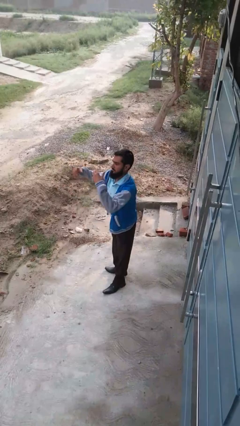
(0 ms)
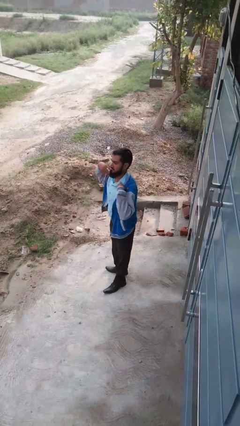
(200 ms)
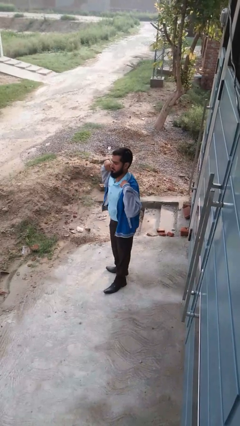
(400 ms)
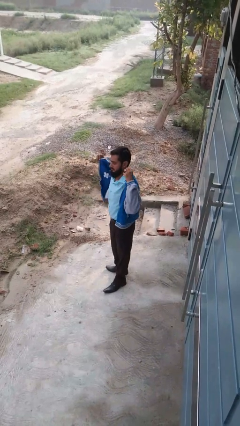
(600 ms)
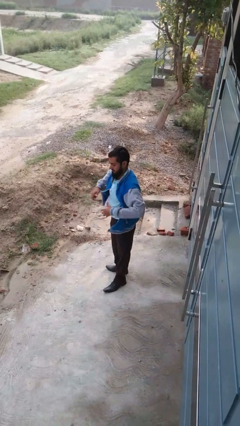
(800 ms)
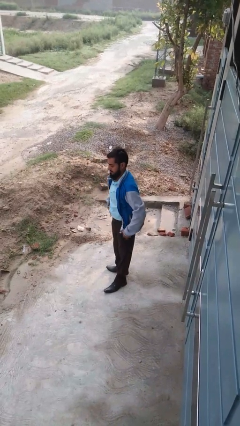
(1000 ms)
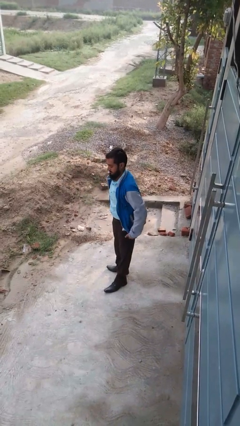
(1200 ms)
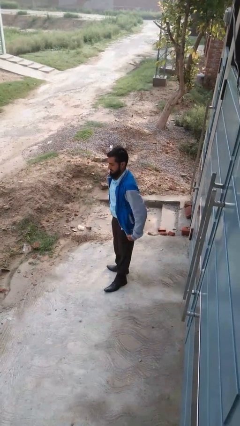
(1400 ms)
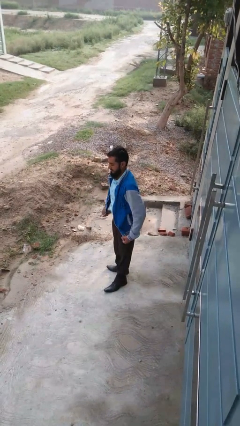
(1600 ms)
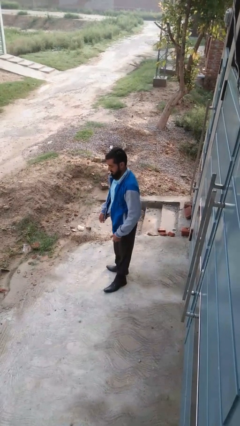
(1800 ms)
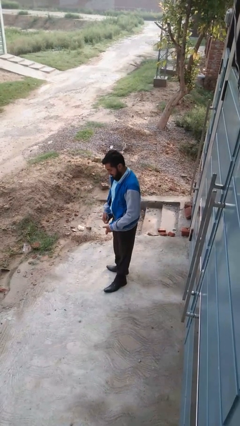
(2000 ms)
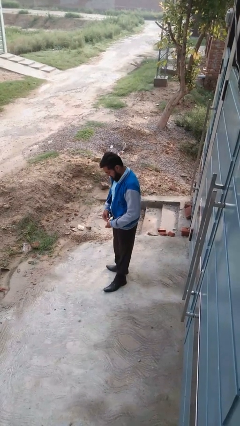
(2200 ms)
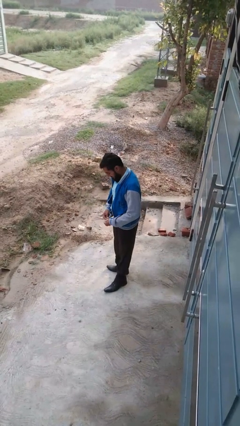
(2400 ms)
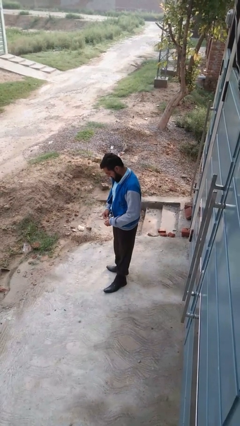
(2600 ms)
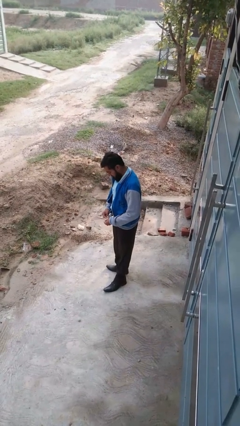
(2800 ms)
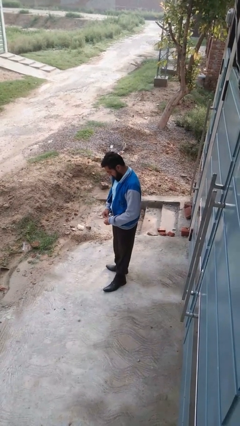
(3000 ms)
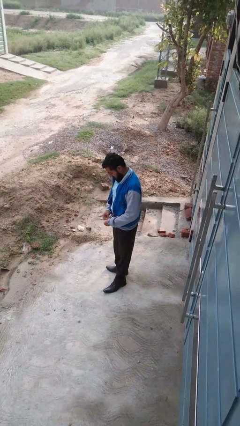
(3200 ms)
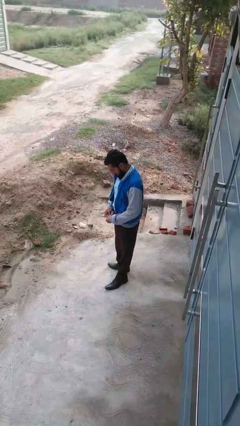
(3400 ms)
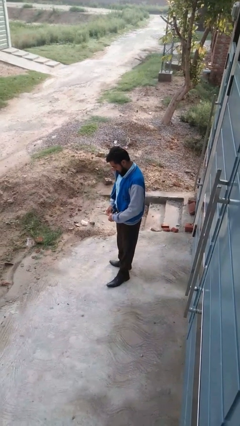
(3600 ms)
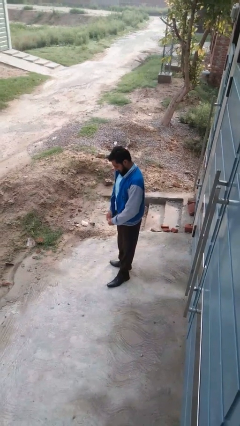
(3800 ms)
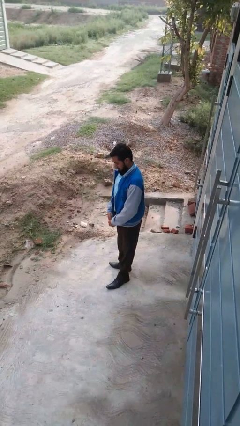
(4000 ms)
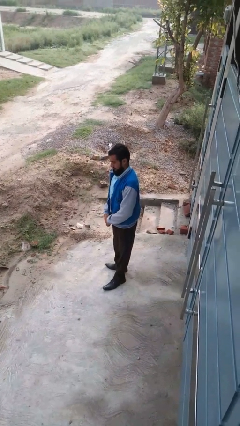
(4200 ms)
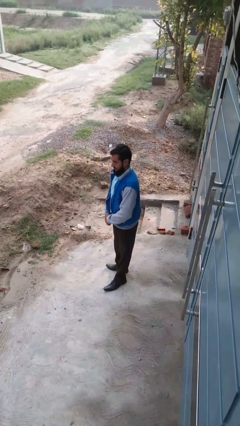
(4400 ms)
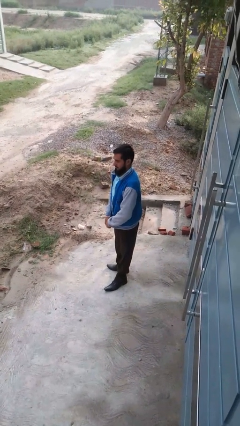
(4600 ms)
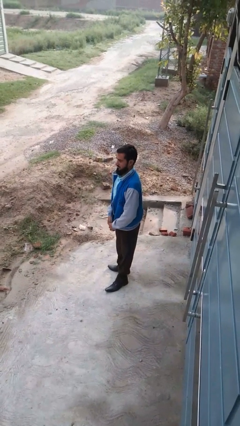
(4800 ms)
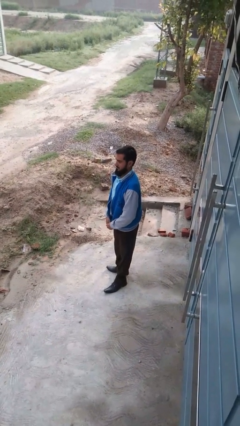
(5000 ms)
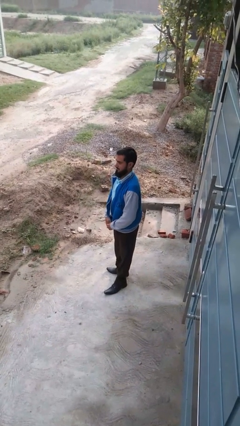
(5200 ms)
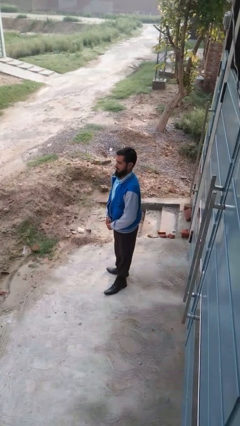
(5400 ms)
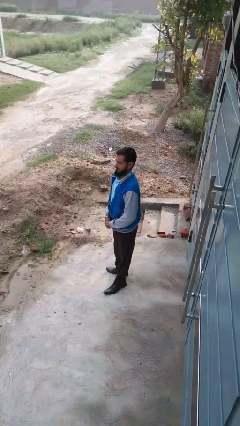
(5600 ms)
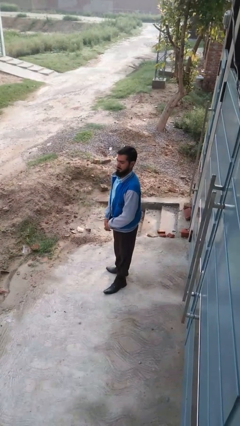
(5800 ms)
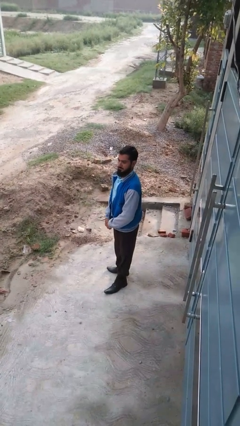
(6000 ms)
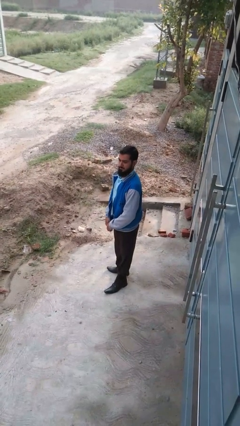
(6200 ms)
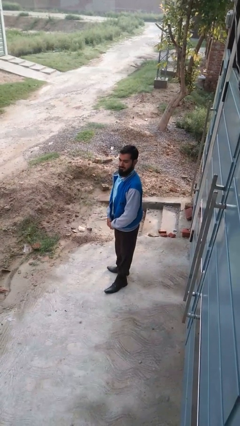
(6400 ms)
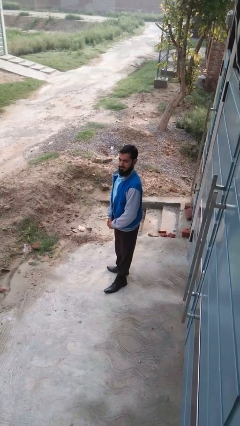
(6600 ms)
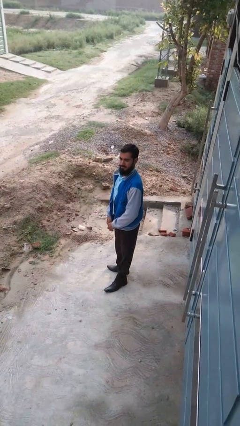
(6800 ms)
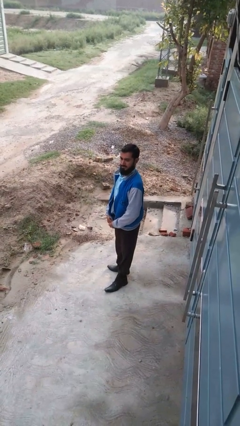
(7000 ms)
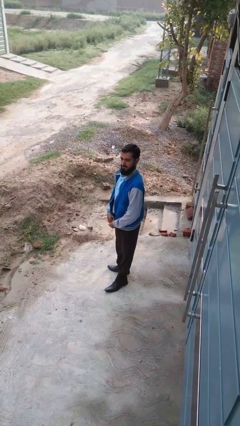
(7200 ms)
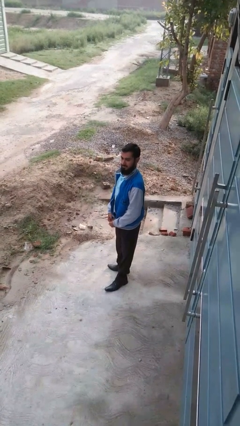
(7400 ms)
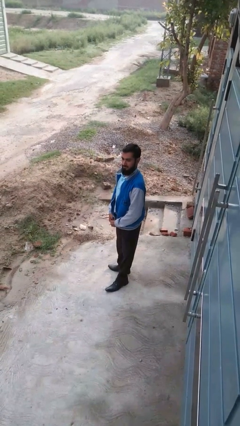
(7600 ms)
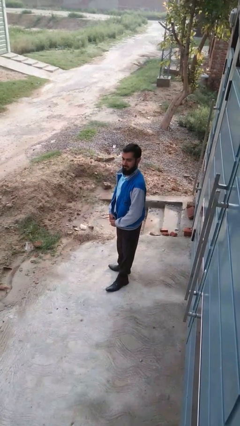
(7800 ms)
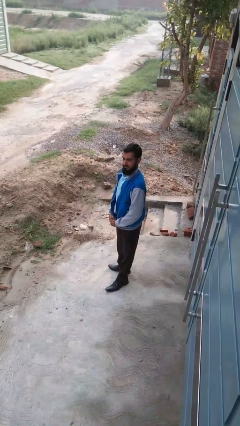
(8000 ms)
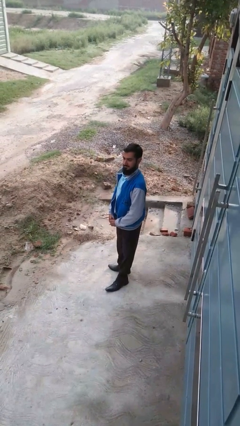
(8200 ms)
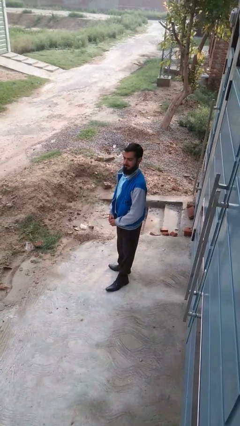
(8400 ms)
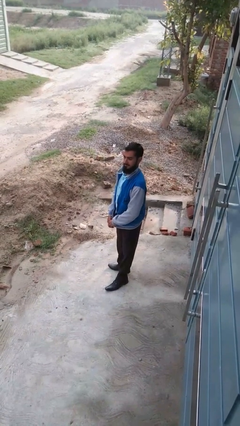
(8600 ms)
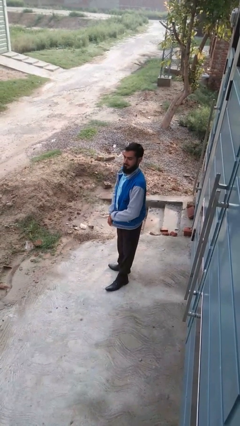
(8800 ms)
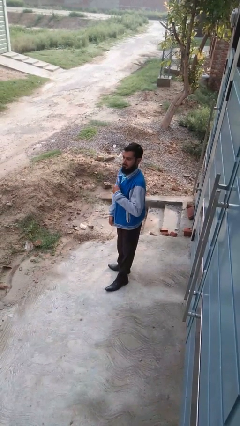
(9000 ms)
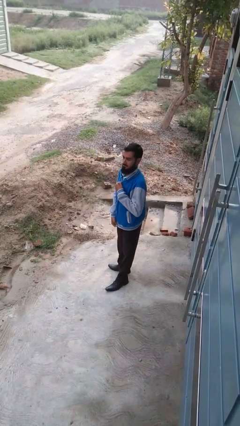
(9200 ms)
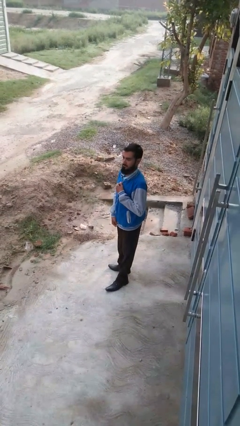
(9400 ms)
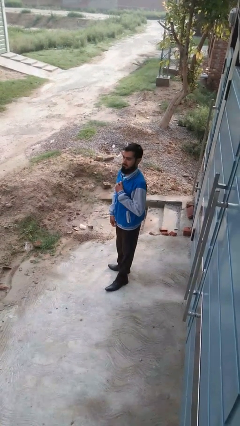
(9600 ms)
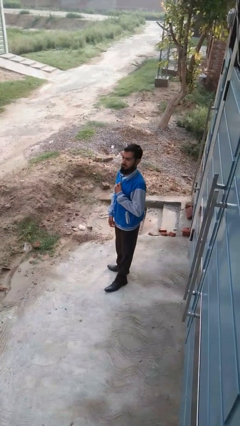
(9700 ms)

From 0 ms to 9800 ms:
person zips up jacket

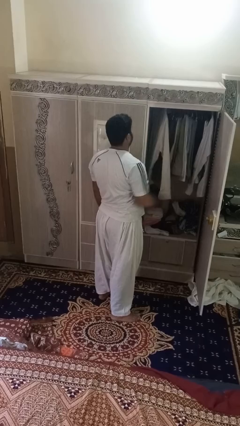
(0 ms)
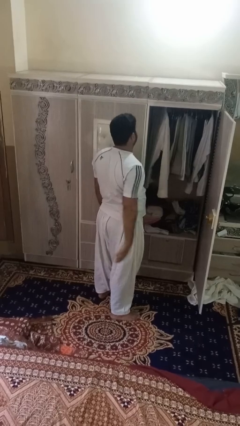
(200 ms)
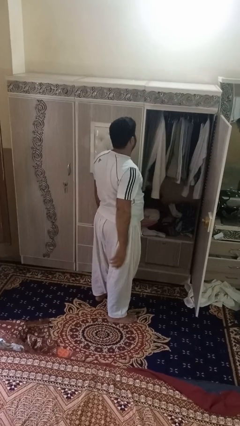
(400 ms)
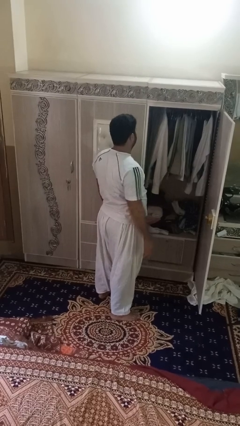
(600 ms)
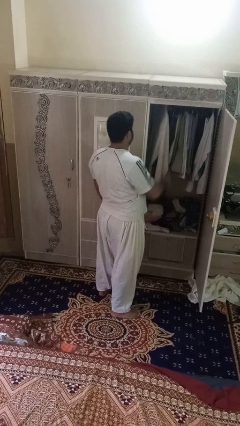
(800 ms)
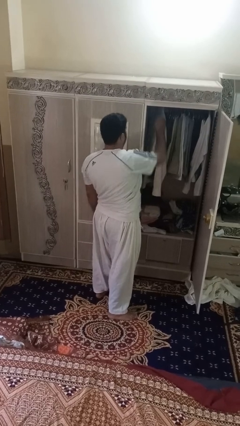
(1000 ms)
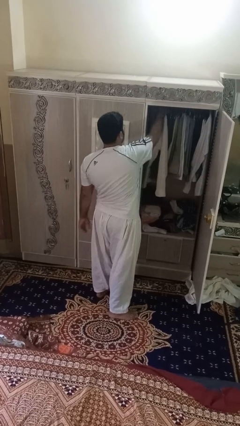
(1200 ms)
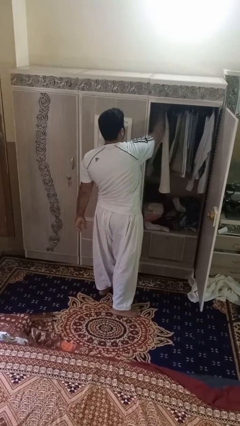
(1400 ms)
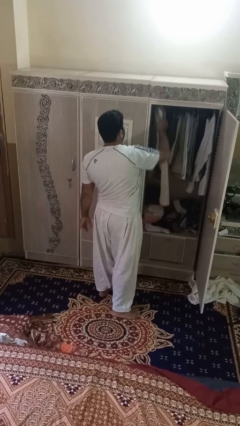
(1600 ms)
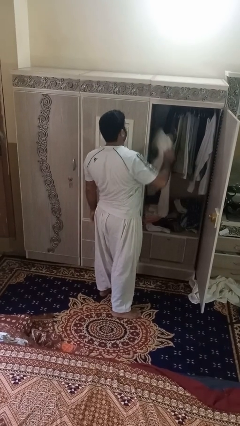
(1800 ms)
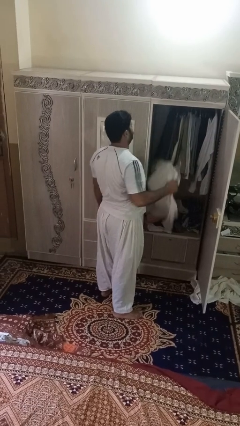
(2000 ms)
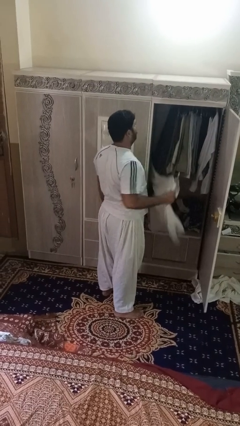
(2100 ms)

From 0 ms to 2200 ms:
person takes clothes from closet

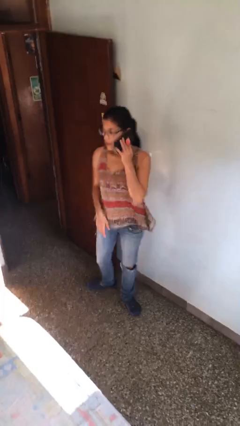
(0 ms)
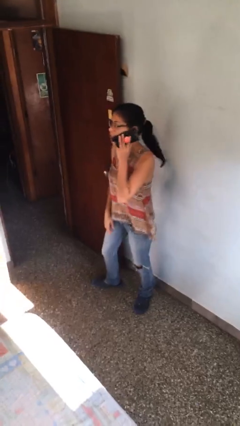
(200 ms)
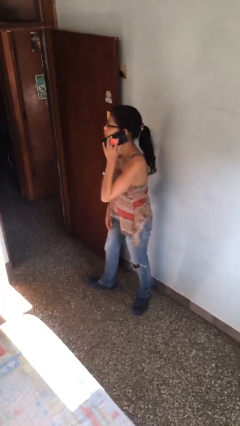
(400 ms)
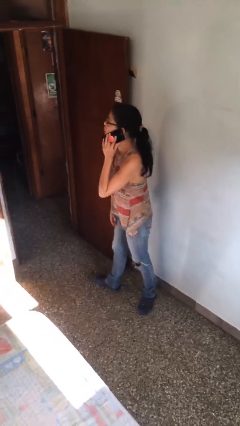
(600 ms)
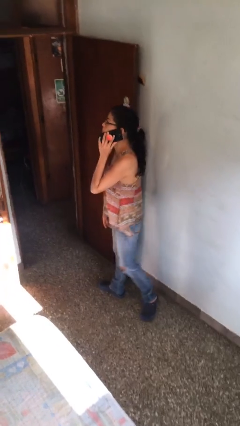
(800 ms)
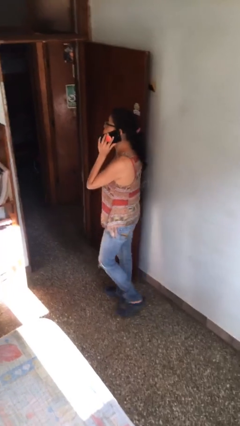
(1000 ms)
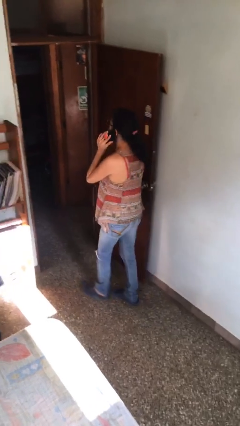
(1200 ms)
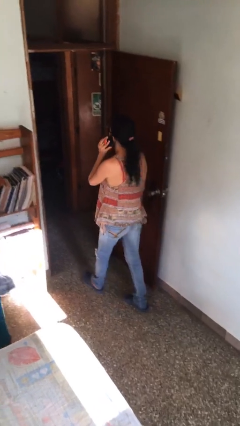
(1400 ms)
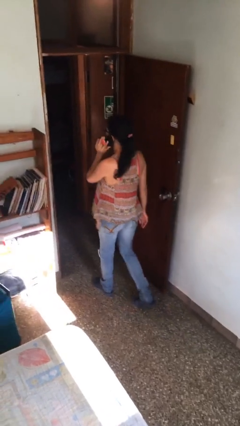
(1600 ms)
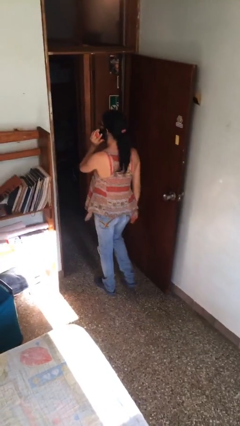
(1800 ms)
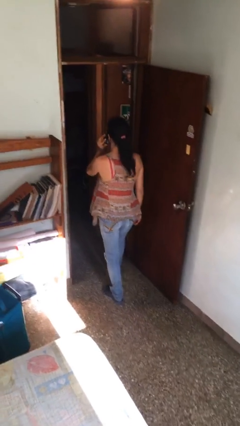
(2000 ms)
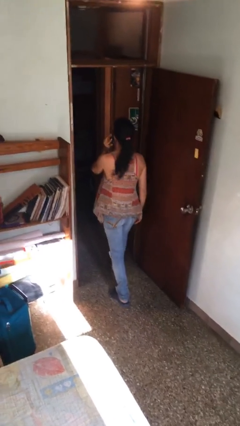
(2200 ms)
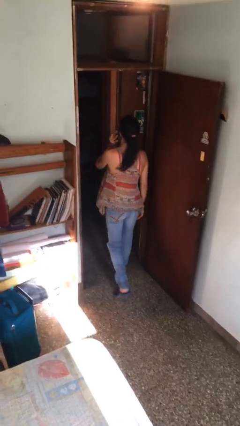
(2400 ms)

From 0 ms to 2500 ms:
person talks on phone

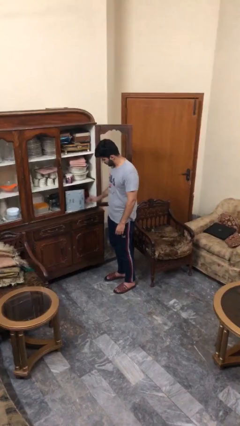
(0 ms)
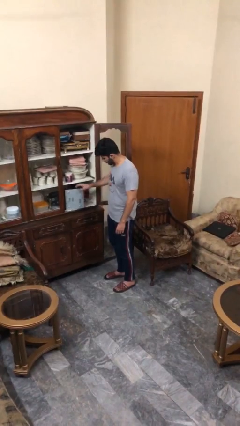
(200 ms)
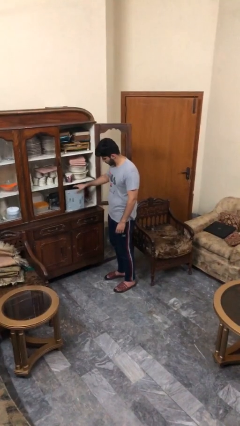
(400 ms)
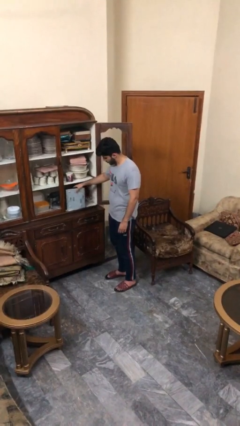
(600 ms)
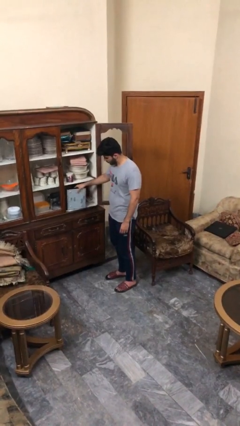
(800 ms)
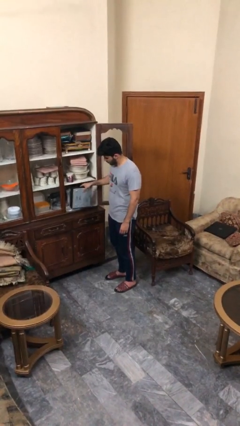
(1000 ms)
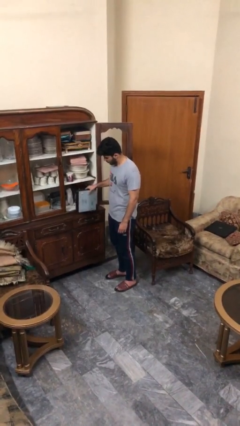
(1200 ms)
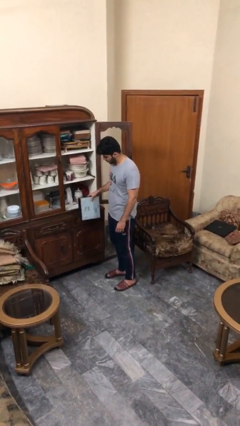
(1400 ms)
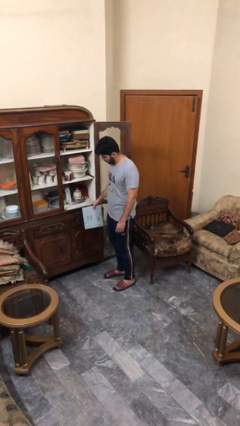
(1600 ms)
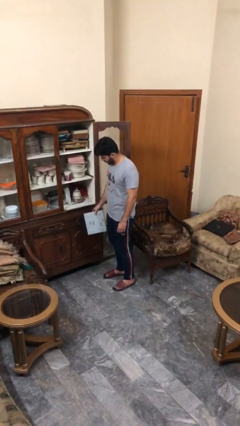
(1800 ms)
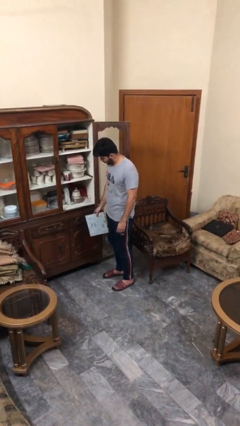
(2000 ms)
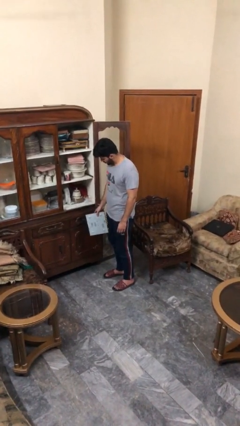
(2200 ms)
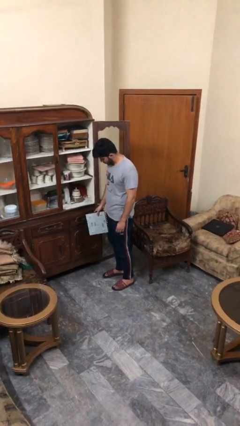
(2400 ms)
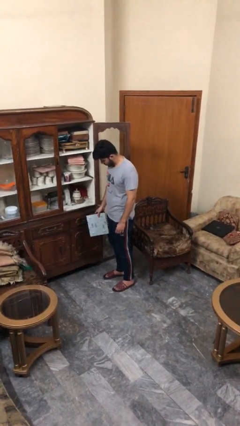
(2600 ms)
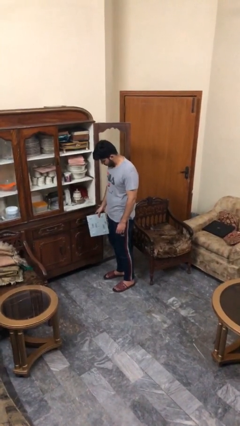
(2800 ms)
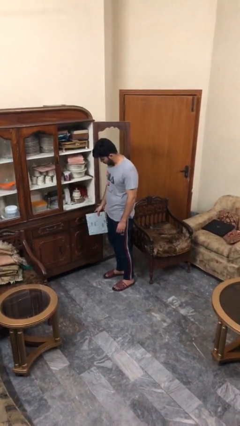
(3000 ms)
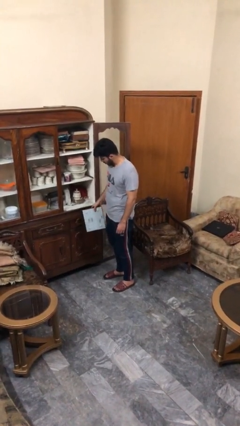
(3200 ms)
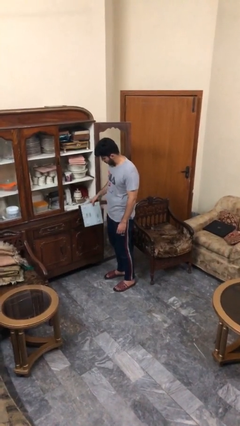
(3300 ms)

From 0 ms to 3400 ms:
person picks up object from cabinet
